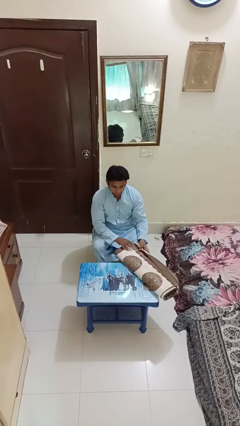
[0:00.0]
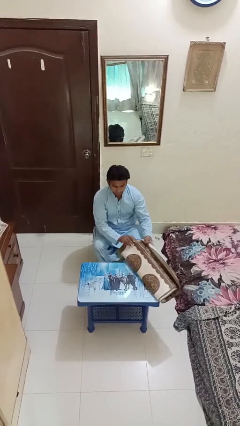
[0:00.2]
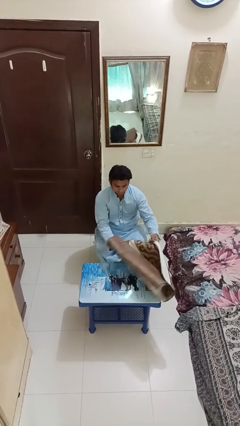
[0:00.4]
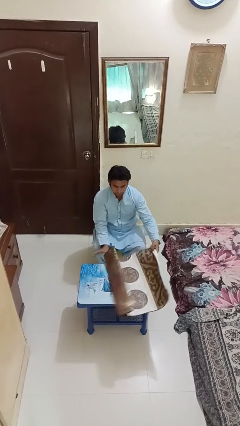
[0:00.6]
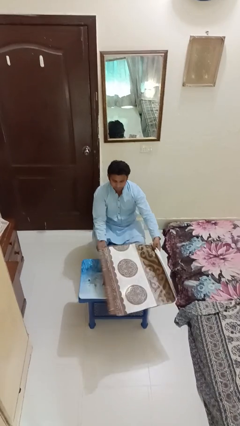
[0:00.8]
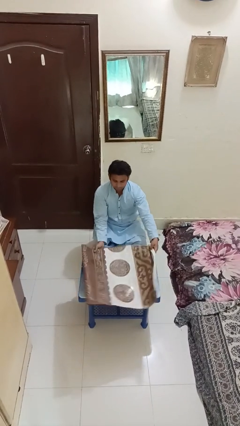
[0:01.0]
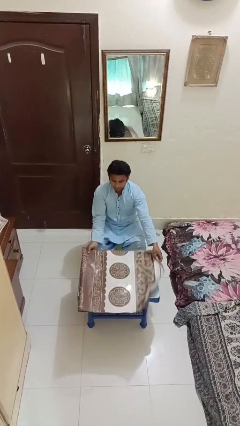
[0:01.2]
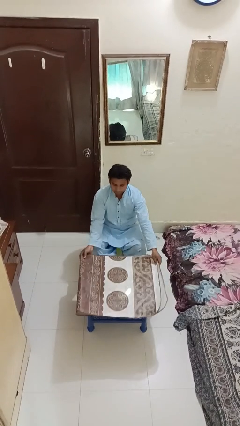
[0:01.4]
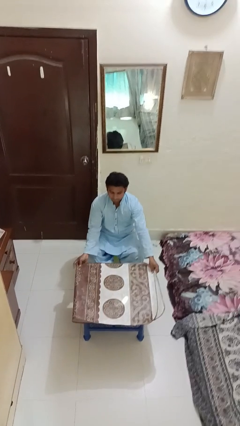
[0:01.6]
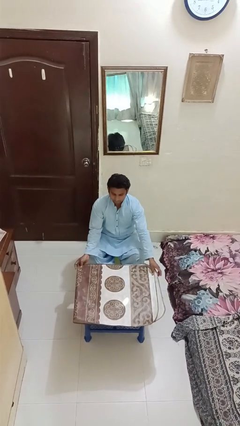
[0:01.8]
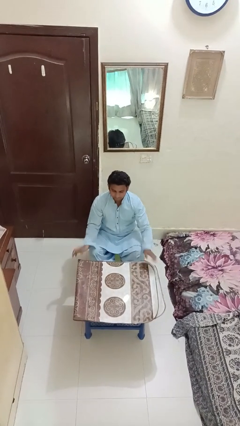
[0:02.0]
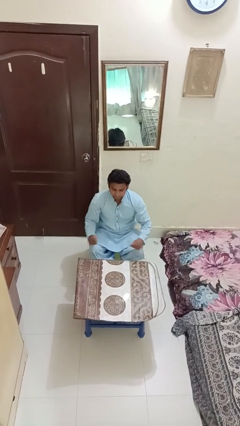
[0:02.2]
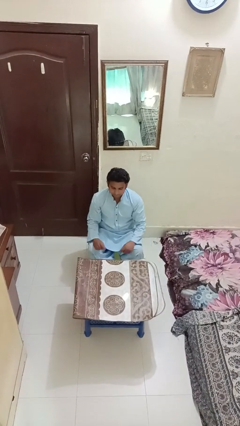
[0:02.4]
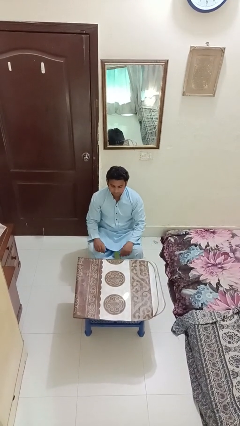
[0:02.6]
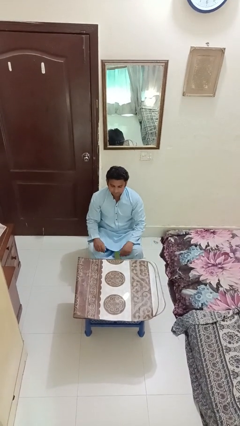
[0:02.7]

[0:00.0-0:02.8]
person spreads tablecloth

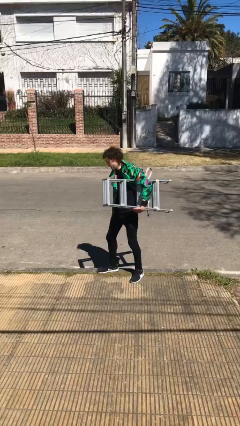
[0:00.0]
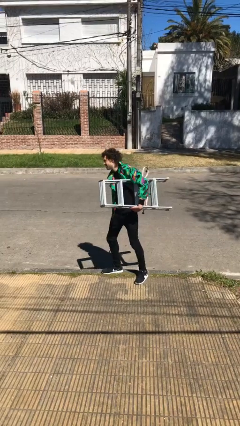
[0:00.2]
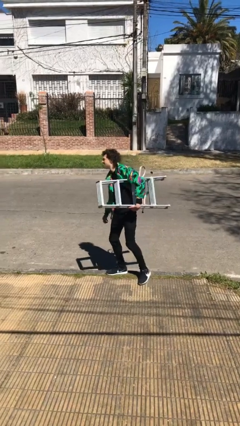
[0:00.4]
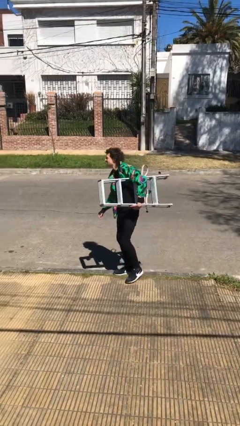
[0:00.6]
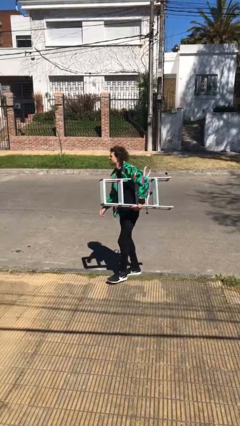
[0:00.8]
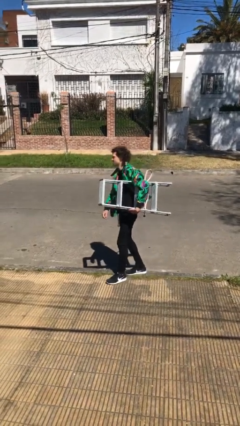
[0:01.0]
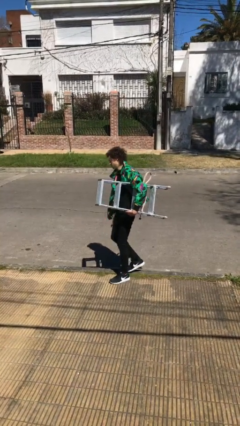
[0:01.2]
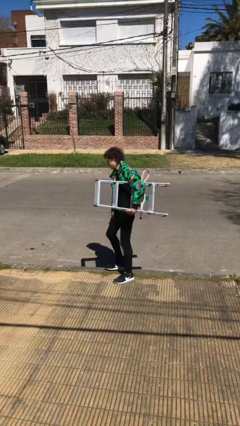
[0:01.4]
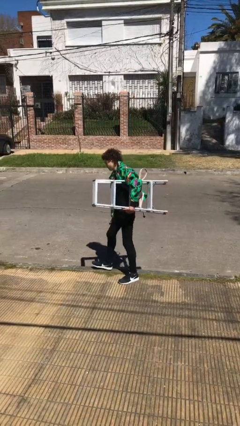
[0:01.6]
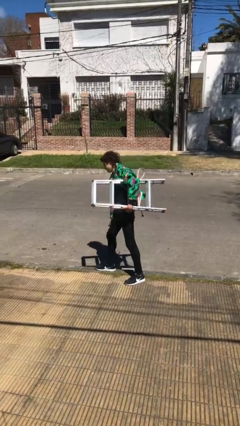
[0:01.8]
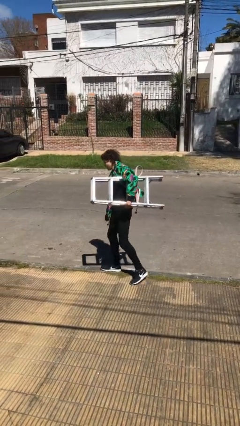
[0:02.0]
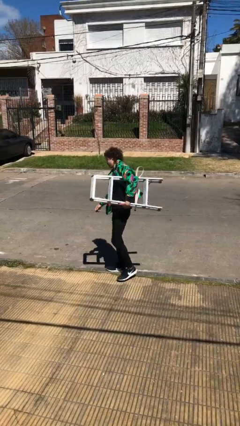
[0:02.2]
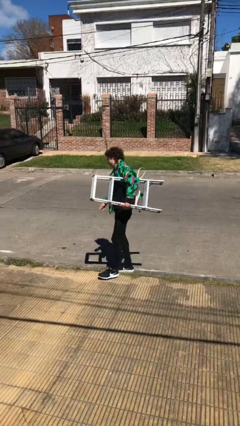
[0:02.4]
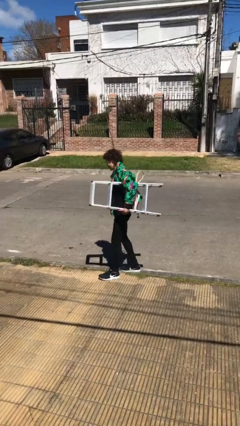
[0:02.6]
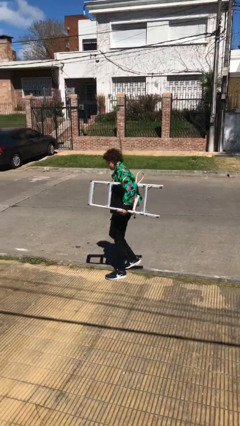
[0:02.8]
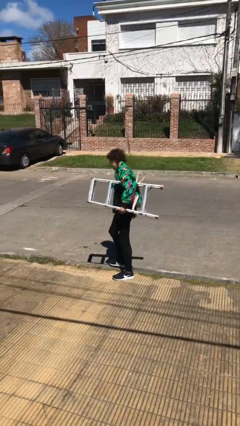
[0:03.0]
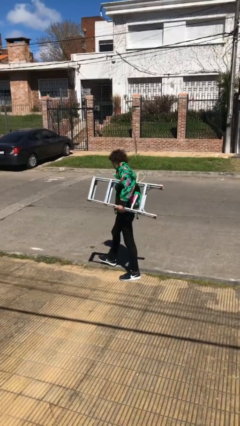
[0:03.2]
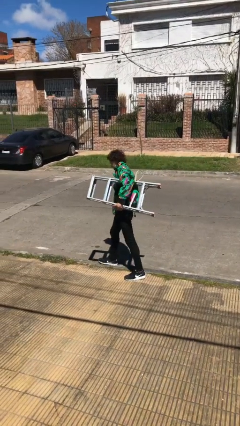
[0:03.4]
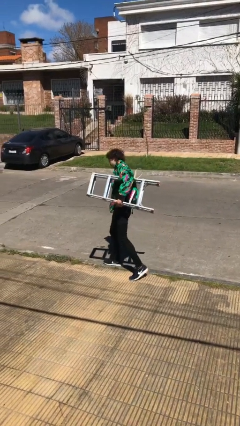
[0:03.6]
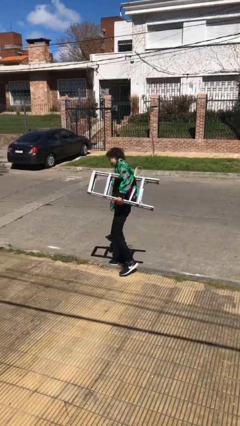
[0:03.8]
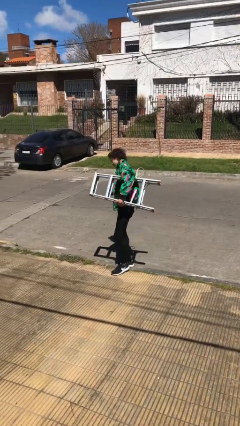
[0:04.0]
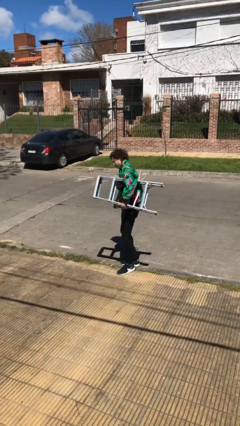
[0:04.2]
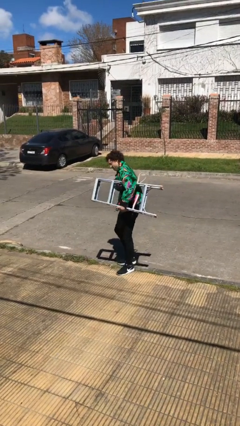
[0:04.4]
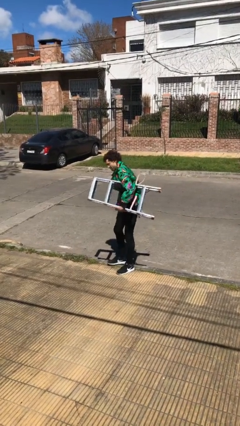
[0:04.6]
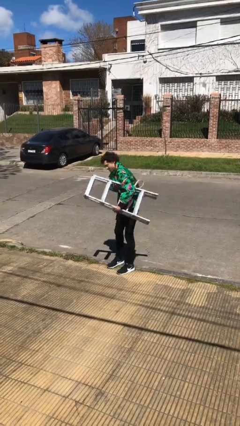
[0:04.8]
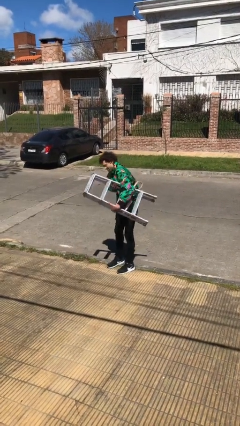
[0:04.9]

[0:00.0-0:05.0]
person carries heavy object

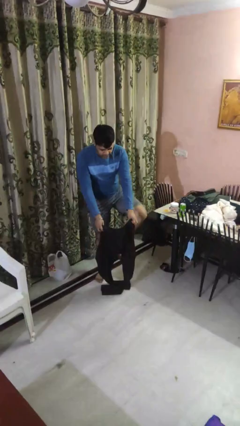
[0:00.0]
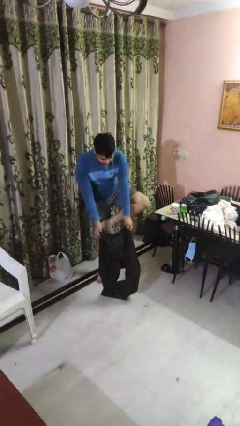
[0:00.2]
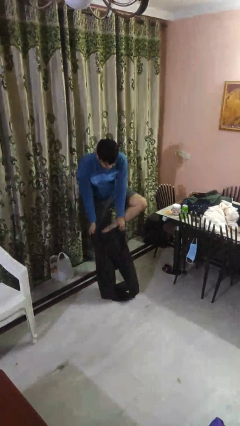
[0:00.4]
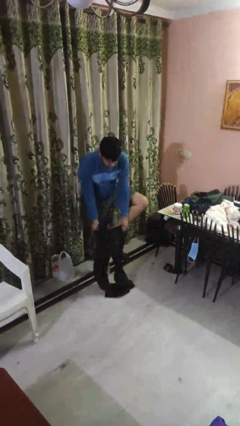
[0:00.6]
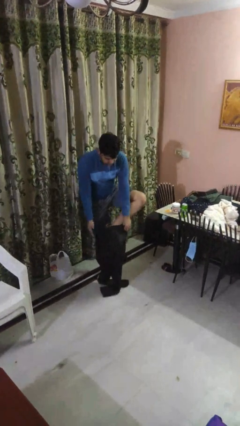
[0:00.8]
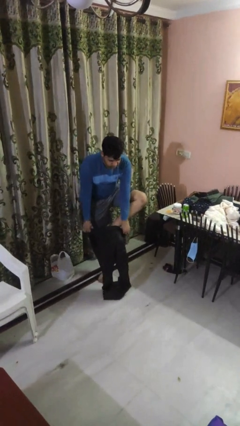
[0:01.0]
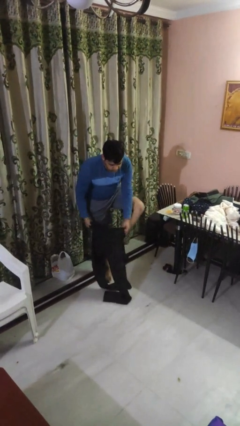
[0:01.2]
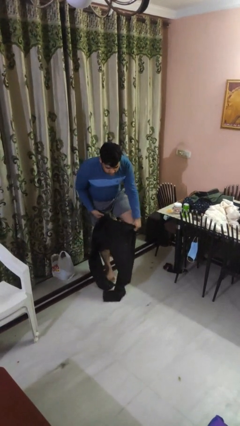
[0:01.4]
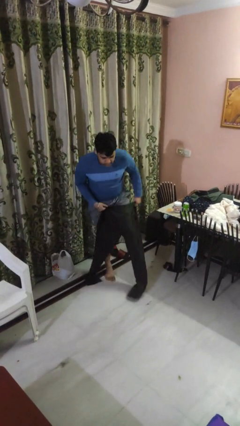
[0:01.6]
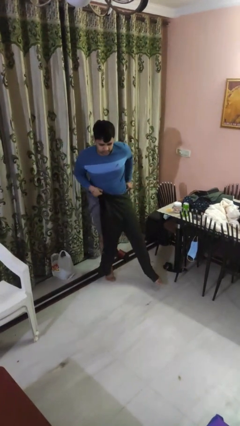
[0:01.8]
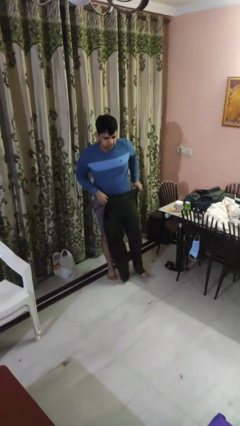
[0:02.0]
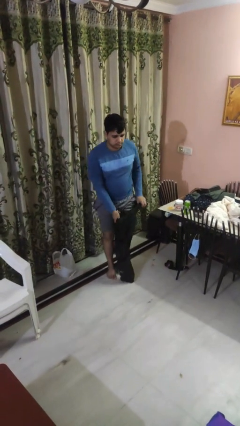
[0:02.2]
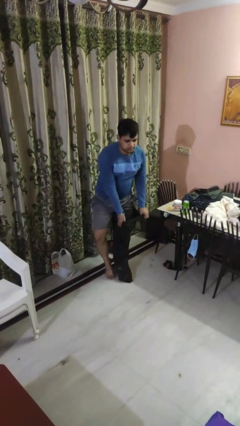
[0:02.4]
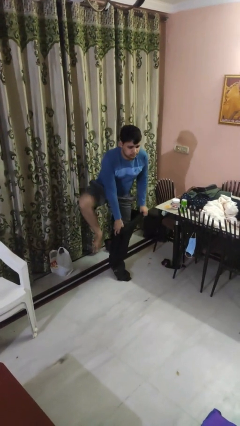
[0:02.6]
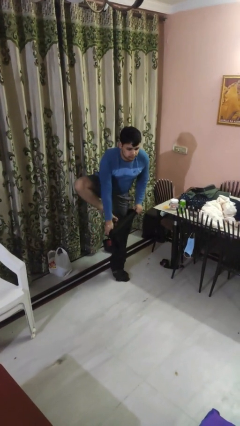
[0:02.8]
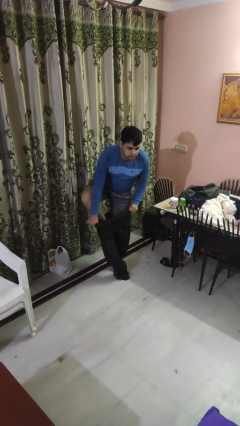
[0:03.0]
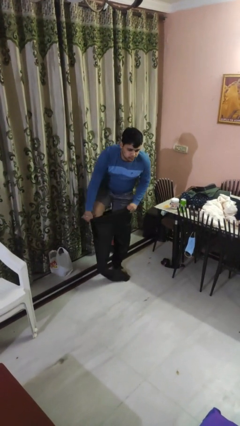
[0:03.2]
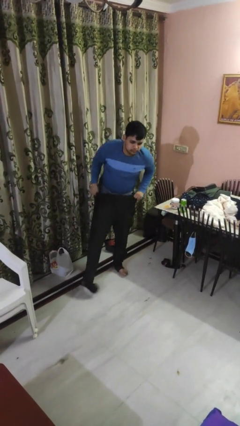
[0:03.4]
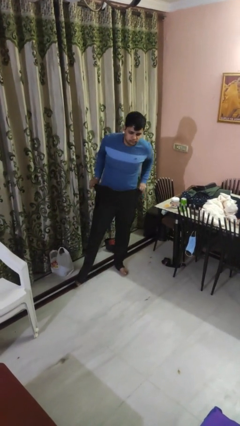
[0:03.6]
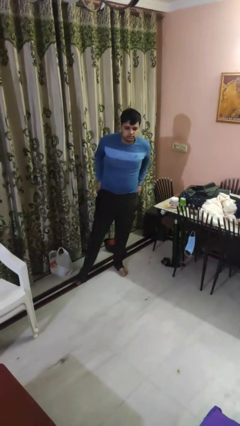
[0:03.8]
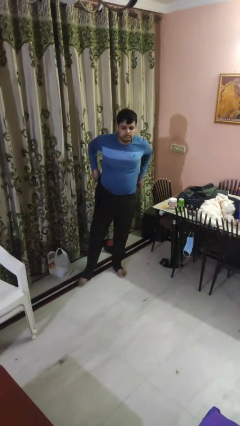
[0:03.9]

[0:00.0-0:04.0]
person puts on pants

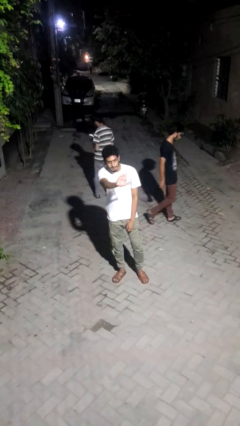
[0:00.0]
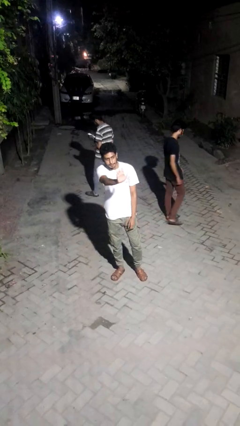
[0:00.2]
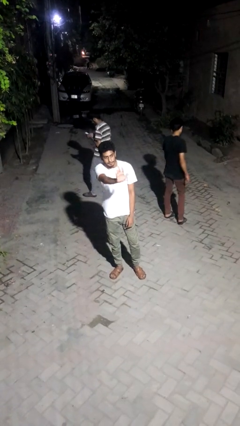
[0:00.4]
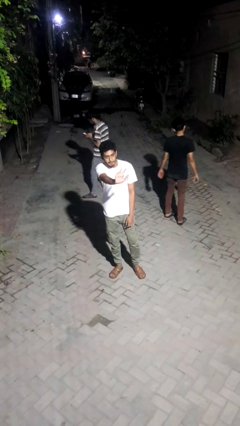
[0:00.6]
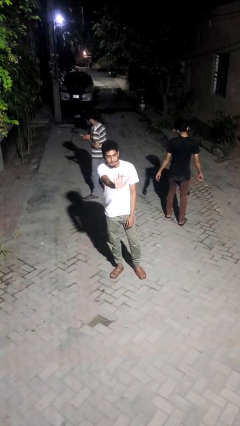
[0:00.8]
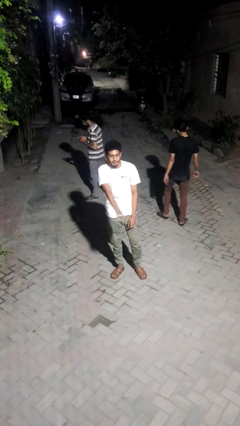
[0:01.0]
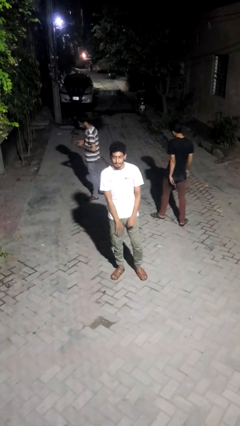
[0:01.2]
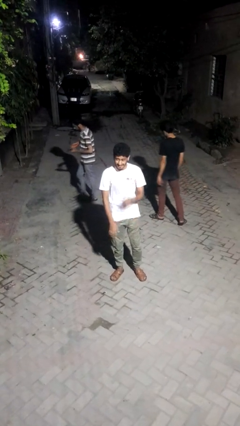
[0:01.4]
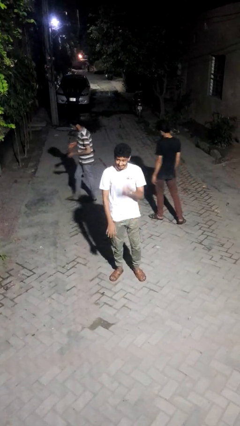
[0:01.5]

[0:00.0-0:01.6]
person waves at person

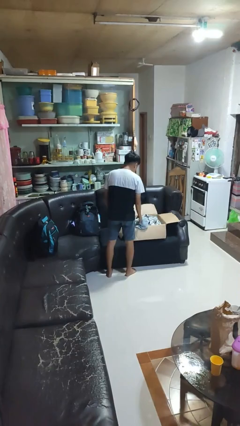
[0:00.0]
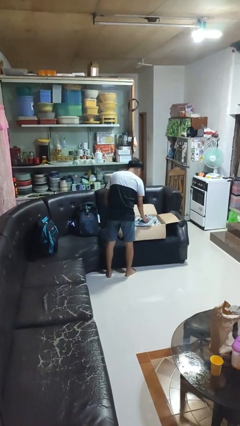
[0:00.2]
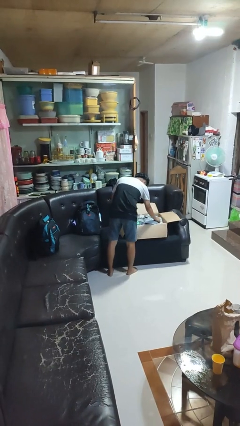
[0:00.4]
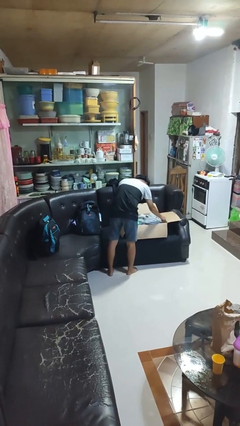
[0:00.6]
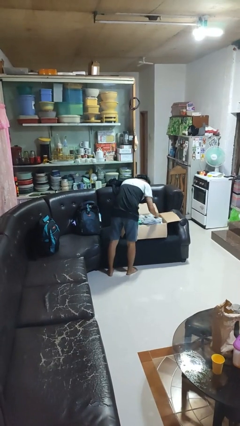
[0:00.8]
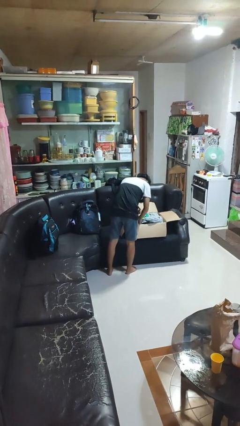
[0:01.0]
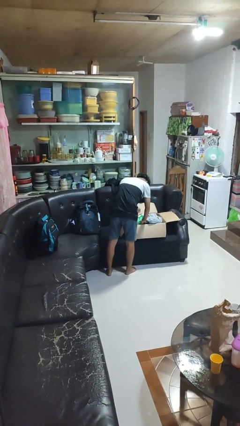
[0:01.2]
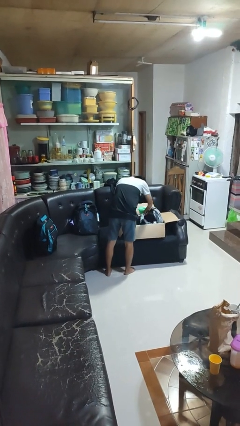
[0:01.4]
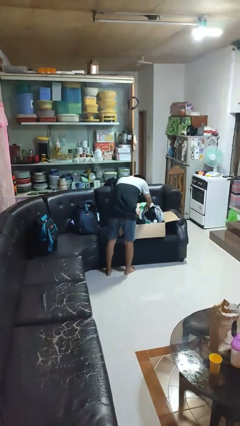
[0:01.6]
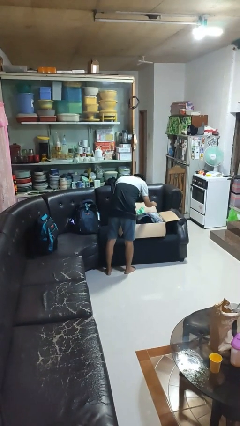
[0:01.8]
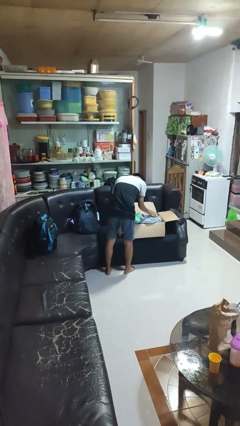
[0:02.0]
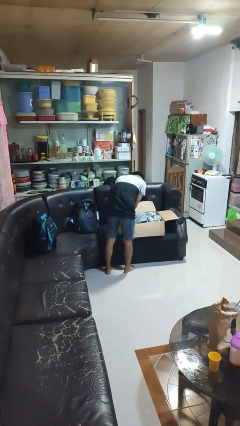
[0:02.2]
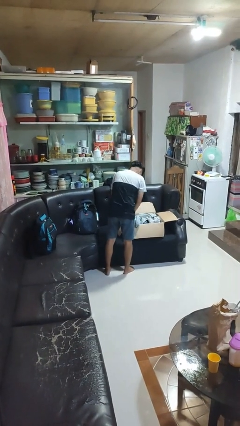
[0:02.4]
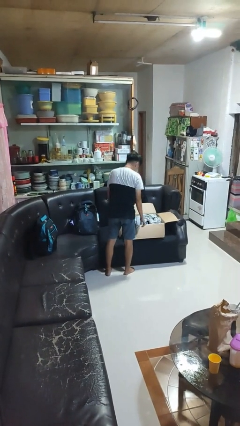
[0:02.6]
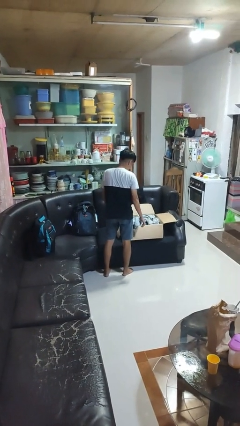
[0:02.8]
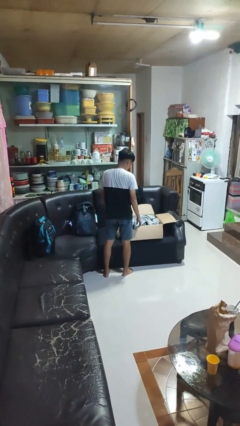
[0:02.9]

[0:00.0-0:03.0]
person searches in box

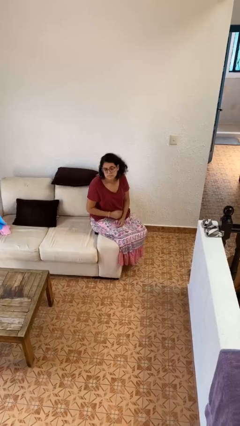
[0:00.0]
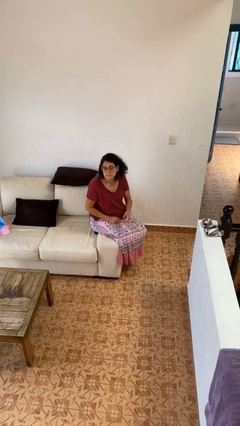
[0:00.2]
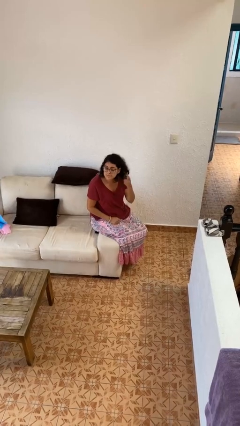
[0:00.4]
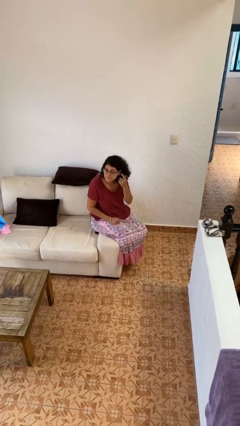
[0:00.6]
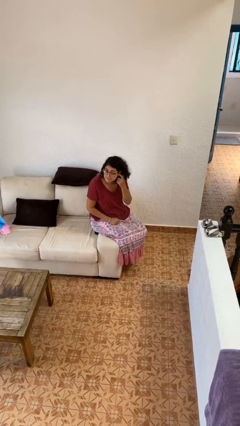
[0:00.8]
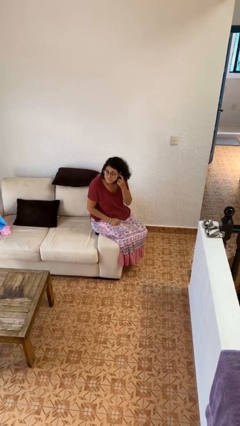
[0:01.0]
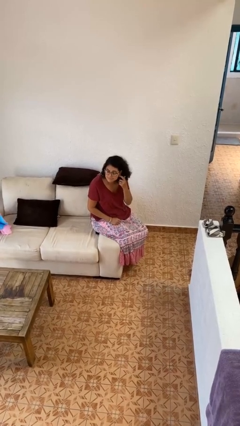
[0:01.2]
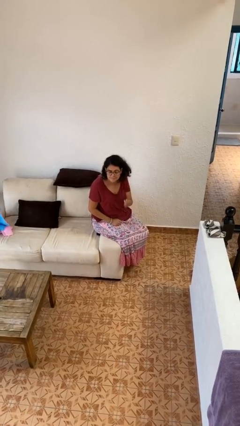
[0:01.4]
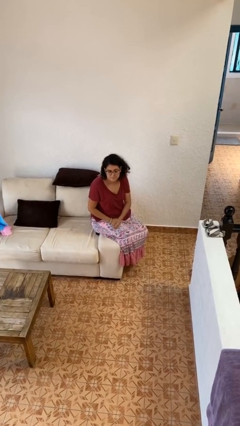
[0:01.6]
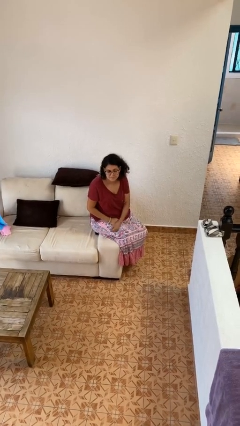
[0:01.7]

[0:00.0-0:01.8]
person gestures listen closely
